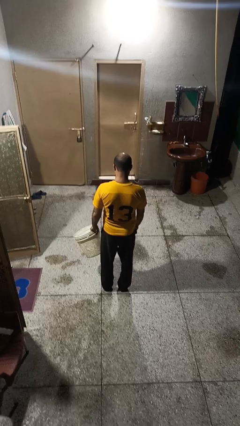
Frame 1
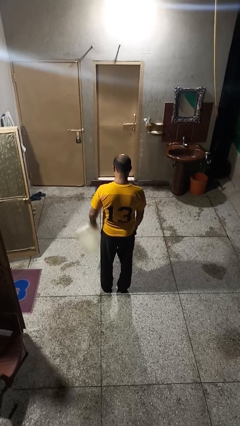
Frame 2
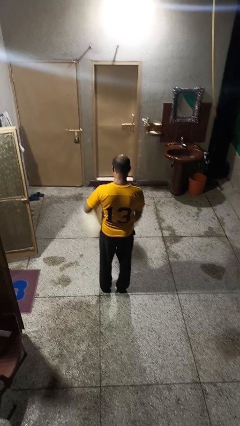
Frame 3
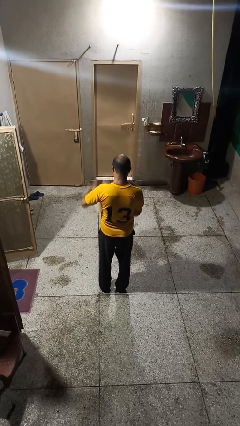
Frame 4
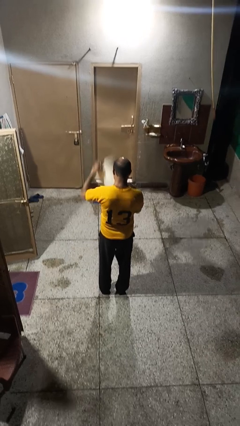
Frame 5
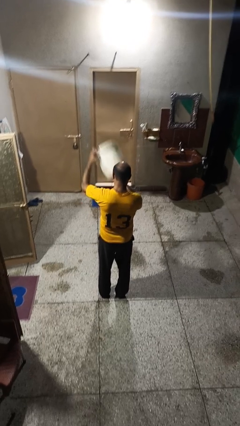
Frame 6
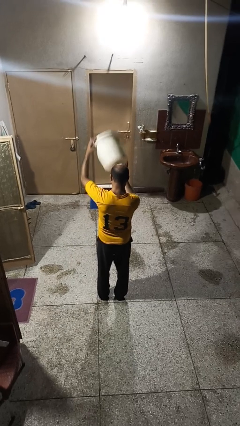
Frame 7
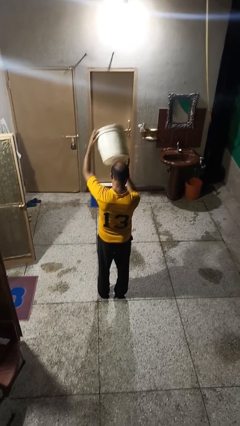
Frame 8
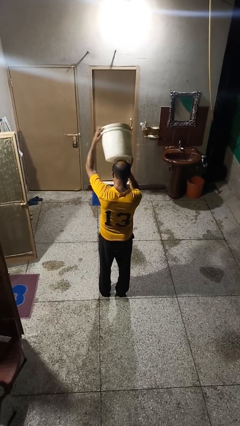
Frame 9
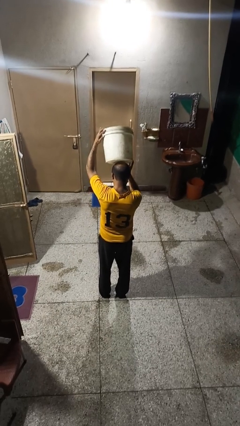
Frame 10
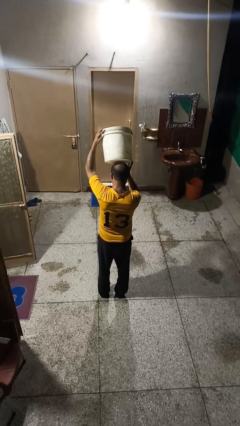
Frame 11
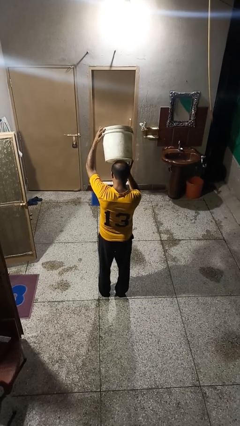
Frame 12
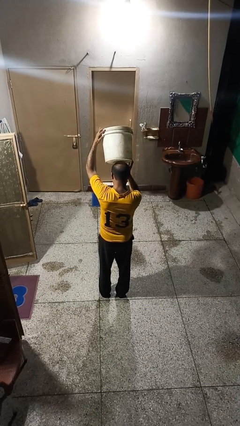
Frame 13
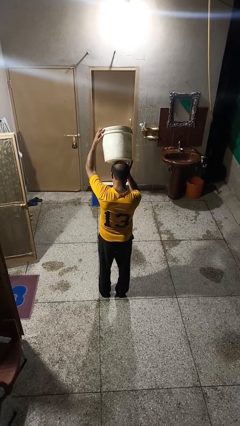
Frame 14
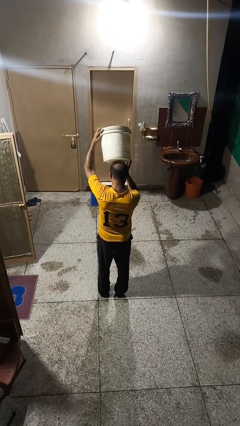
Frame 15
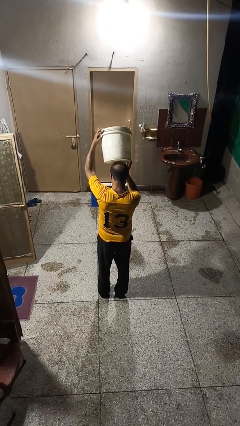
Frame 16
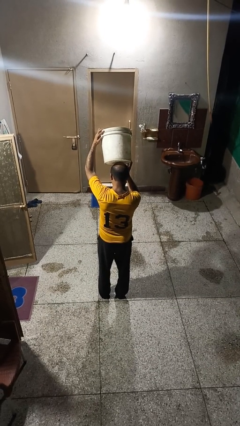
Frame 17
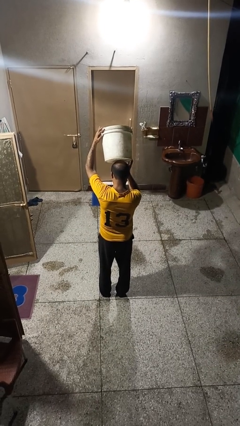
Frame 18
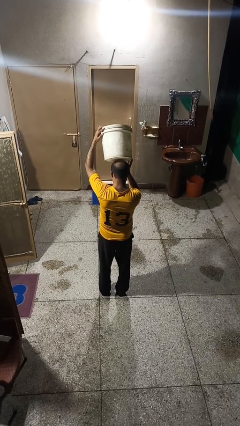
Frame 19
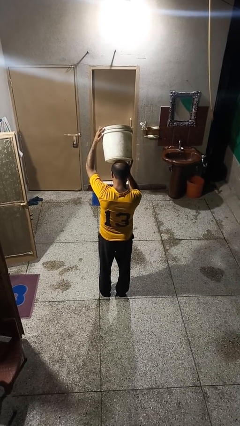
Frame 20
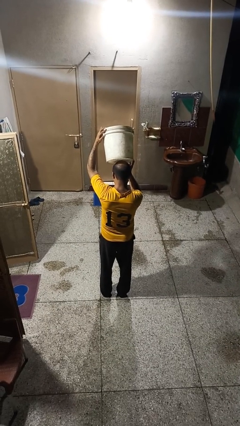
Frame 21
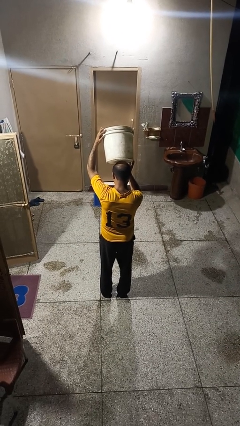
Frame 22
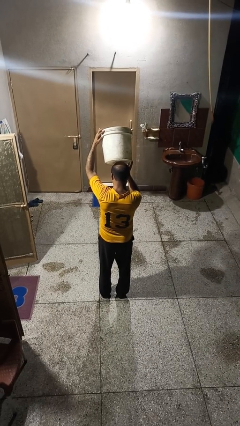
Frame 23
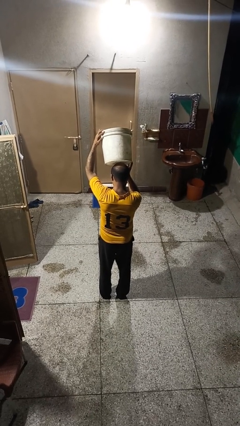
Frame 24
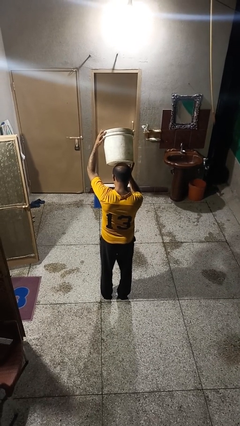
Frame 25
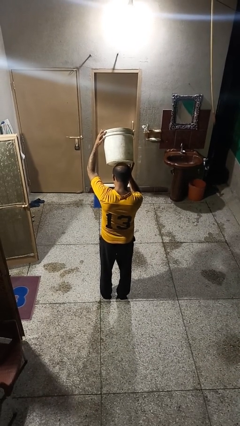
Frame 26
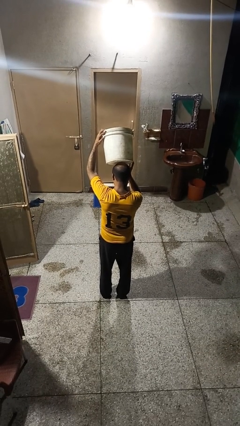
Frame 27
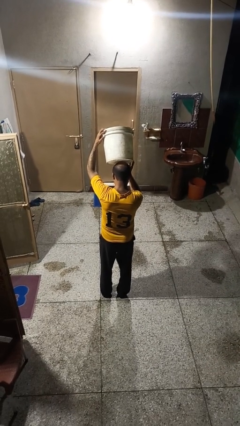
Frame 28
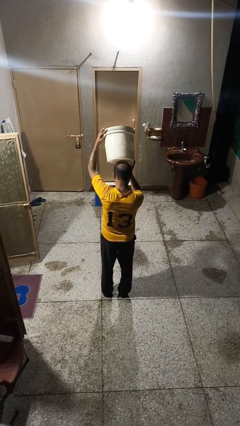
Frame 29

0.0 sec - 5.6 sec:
person holds object above head

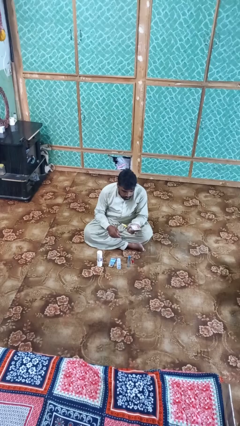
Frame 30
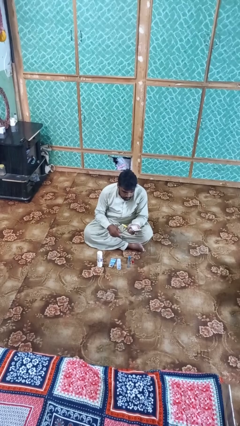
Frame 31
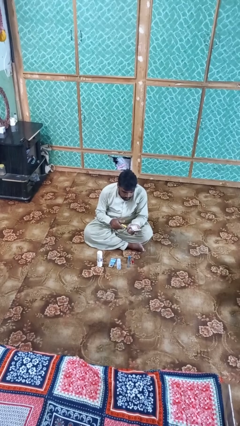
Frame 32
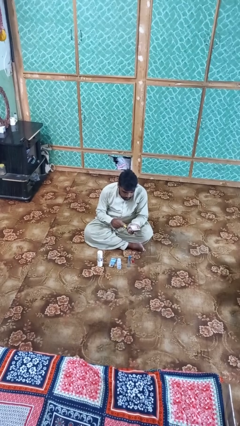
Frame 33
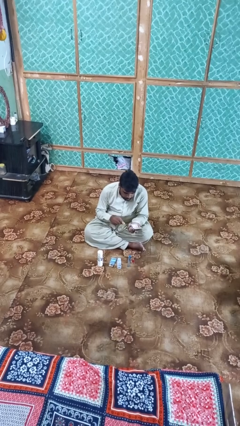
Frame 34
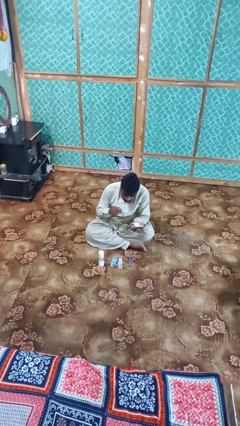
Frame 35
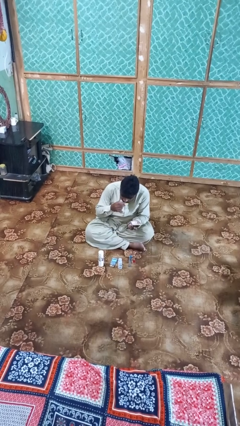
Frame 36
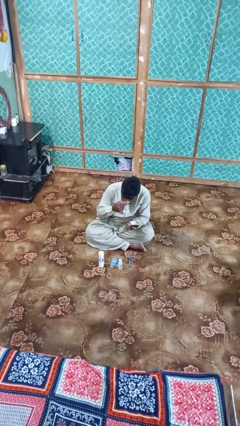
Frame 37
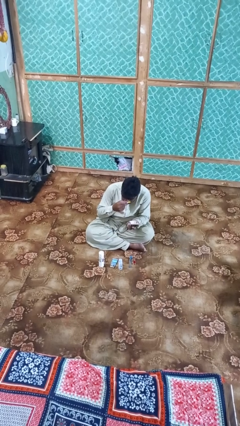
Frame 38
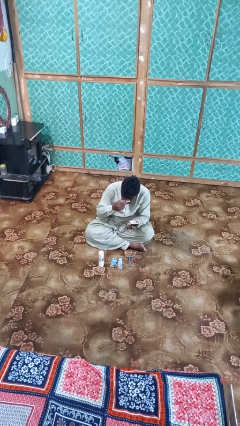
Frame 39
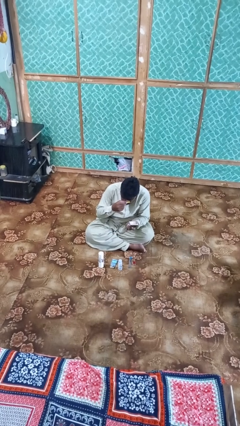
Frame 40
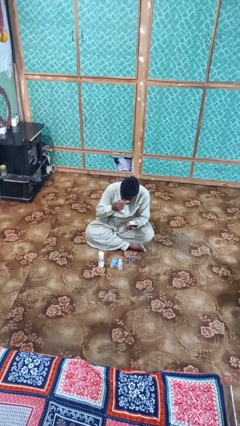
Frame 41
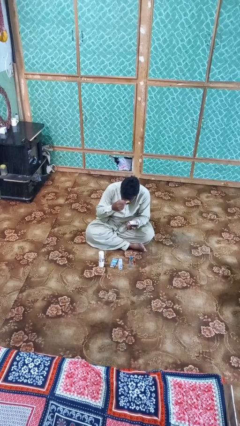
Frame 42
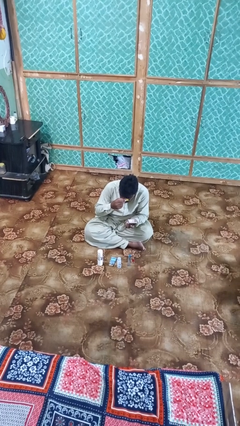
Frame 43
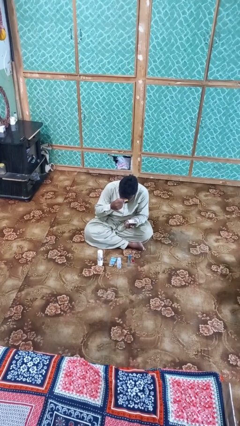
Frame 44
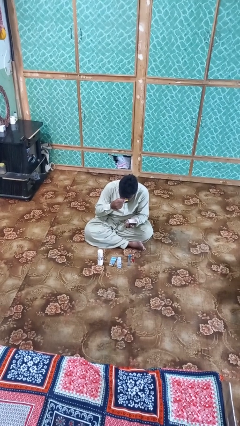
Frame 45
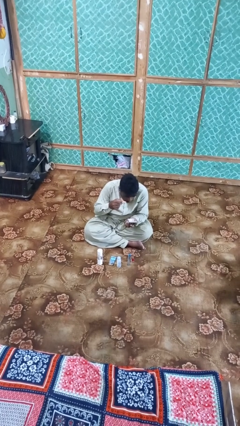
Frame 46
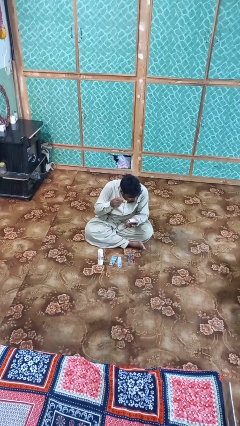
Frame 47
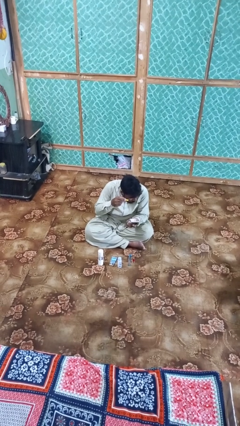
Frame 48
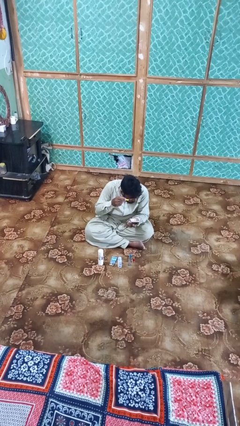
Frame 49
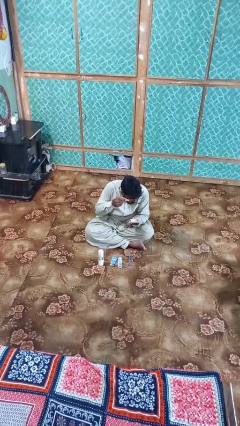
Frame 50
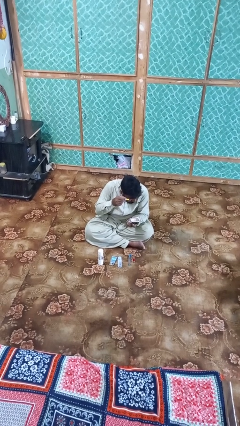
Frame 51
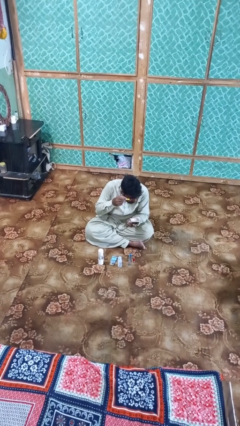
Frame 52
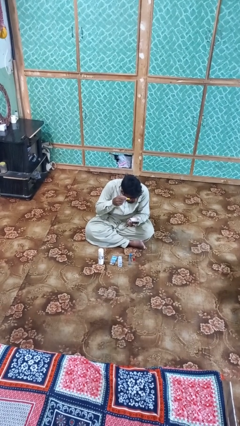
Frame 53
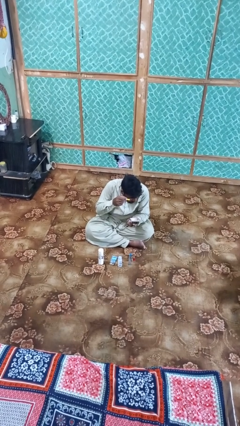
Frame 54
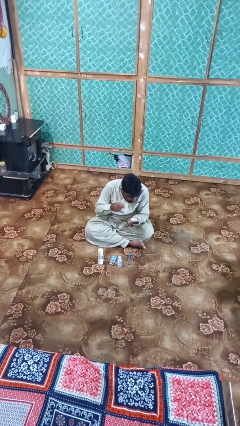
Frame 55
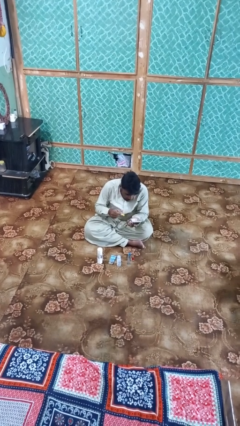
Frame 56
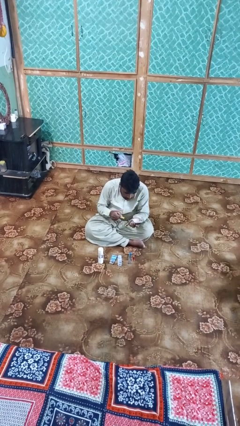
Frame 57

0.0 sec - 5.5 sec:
person applies eye makeup

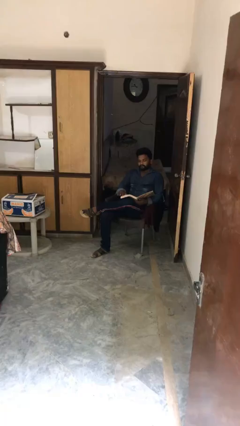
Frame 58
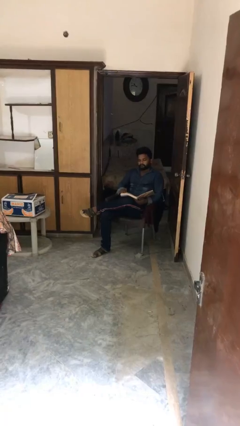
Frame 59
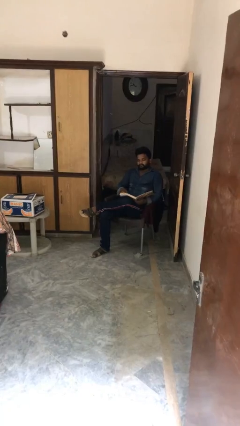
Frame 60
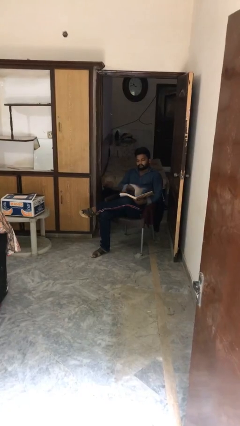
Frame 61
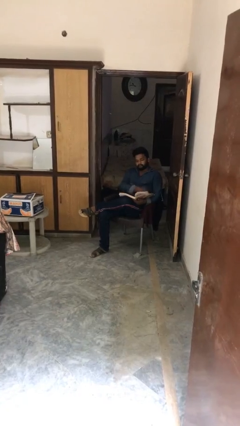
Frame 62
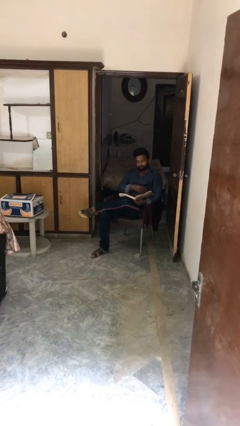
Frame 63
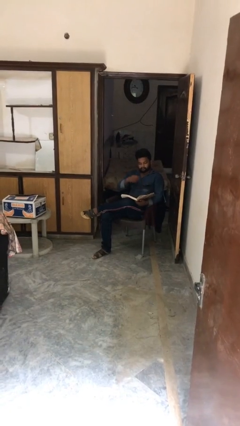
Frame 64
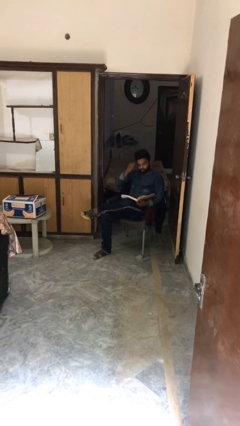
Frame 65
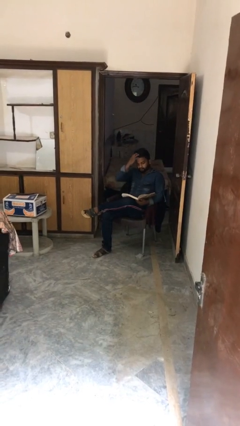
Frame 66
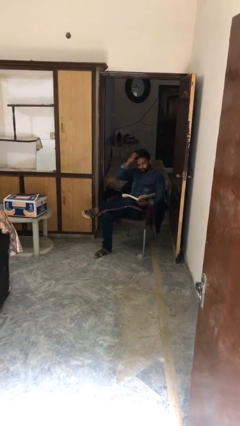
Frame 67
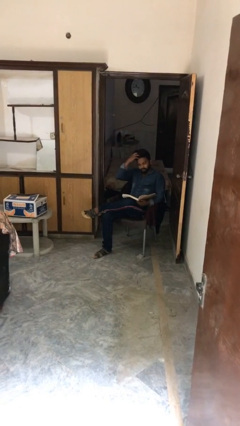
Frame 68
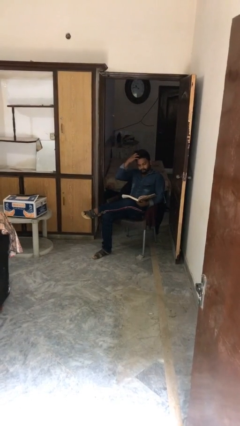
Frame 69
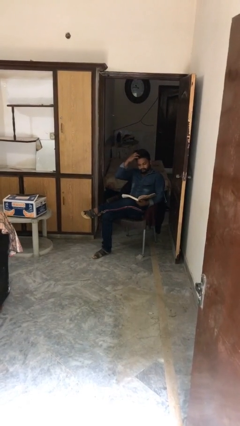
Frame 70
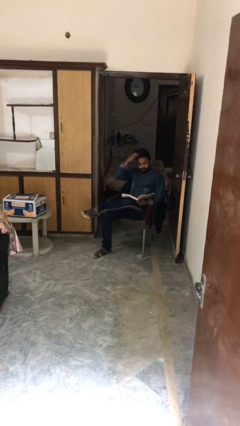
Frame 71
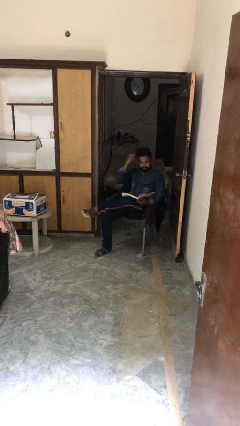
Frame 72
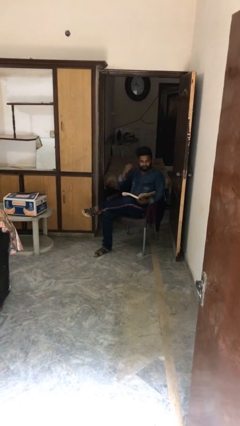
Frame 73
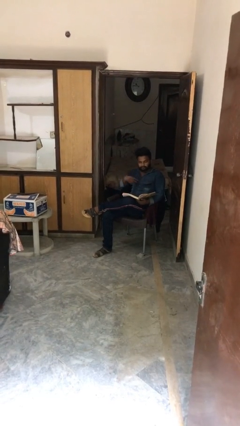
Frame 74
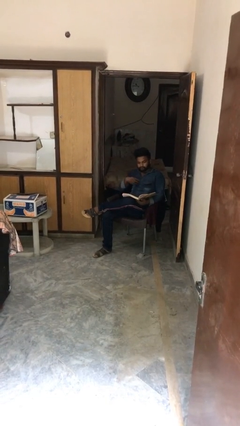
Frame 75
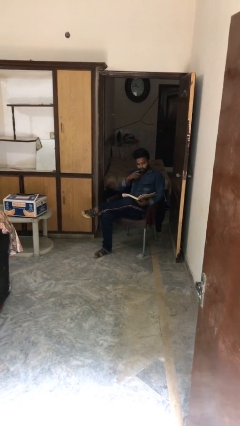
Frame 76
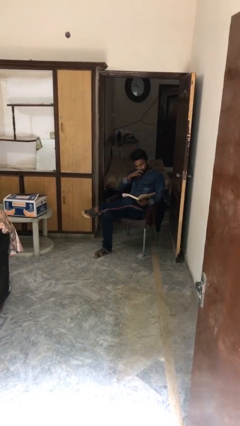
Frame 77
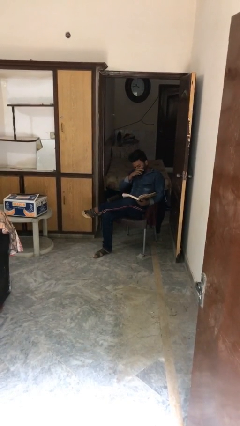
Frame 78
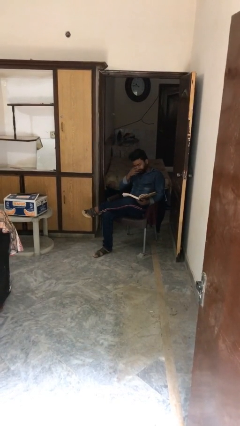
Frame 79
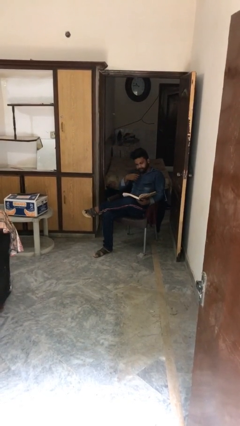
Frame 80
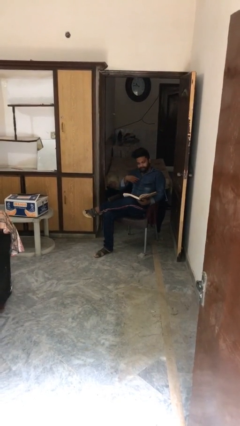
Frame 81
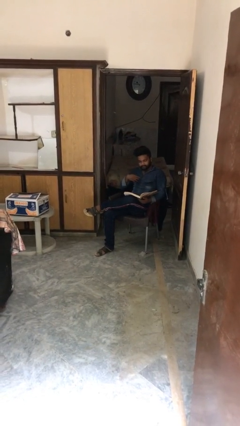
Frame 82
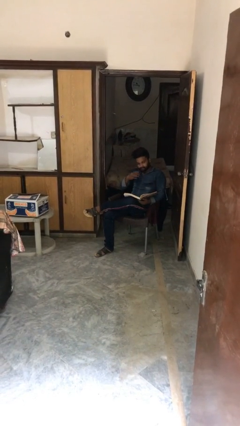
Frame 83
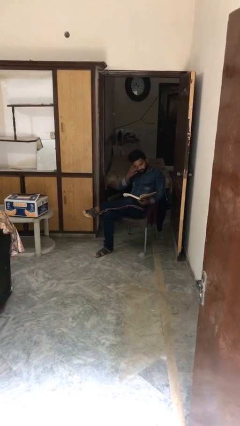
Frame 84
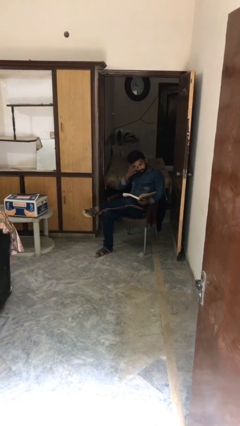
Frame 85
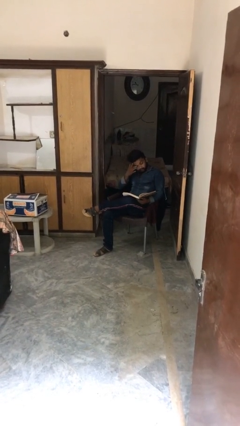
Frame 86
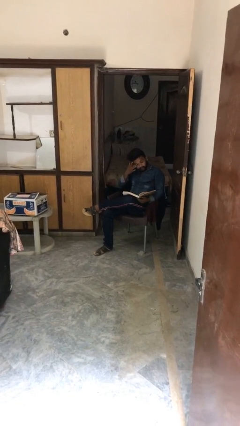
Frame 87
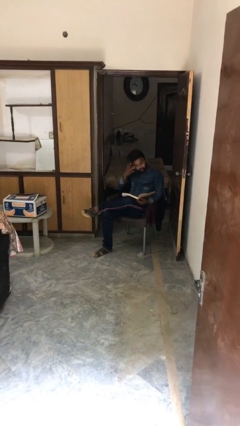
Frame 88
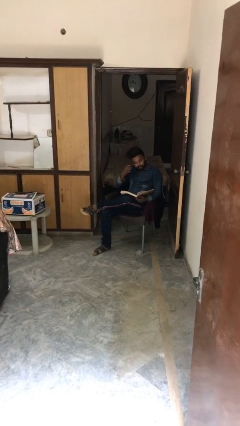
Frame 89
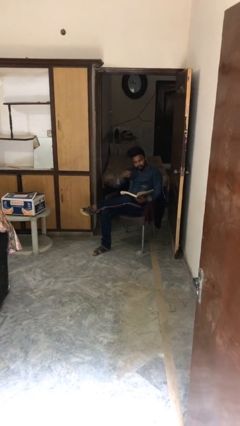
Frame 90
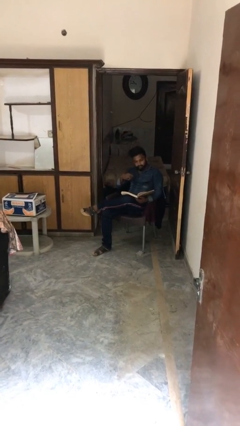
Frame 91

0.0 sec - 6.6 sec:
person reads document

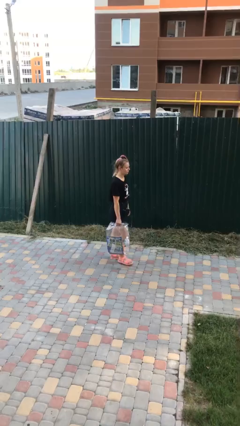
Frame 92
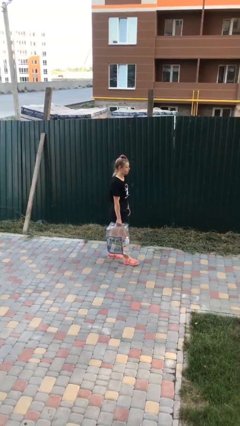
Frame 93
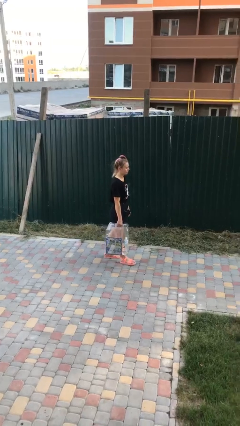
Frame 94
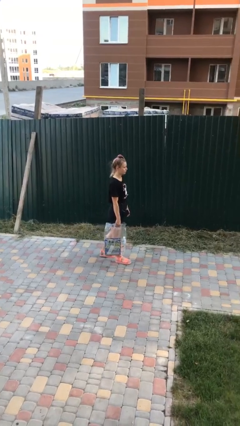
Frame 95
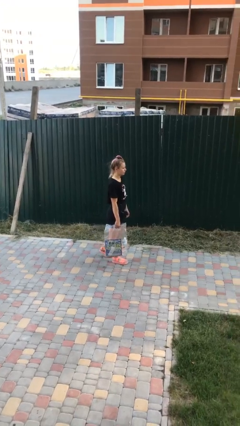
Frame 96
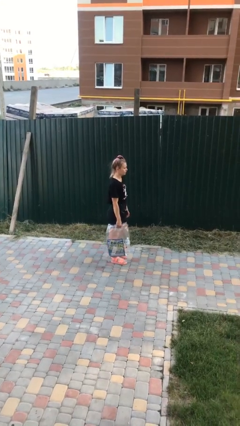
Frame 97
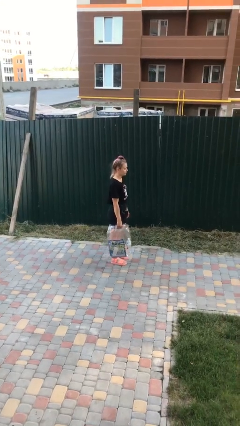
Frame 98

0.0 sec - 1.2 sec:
person carries groceries
